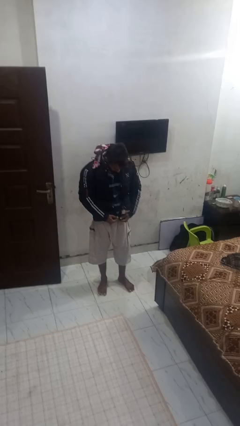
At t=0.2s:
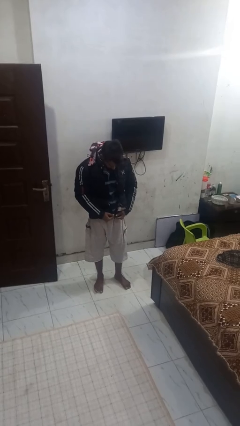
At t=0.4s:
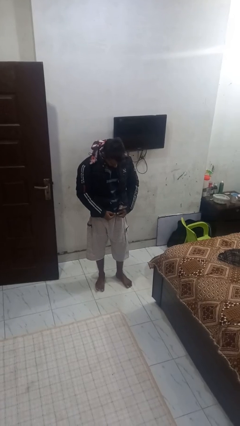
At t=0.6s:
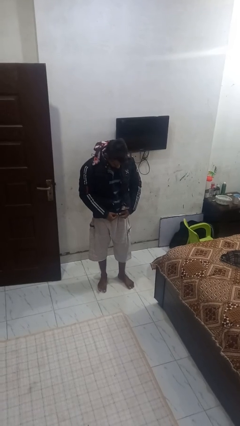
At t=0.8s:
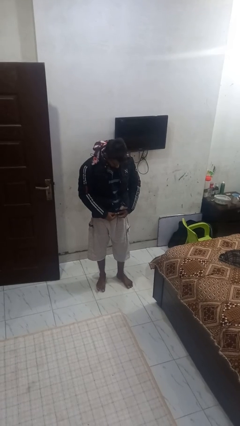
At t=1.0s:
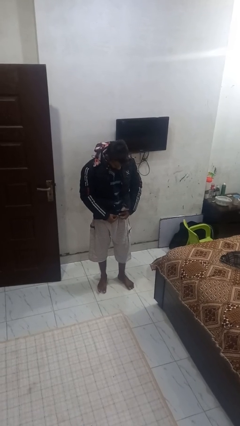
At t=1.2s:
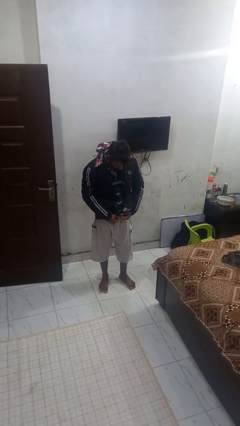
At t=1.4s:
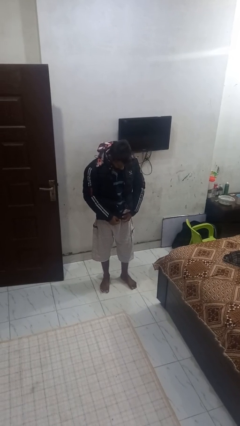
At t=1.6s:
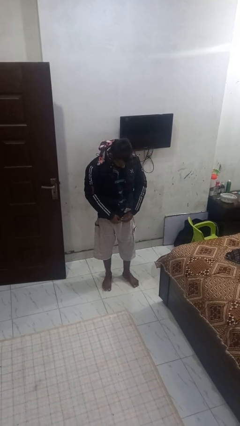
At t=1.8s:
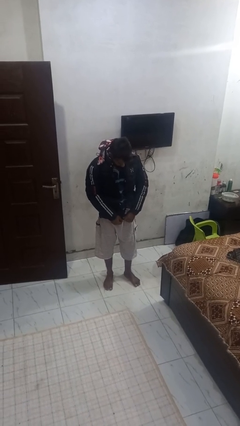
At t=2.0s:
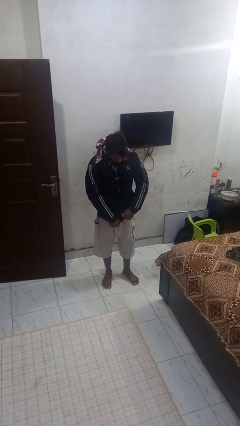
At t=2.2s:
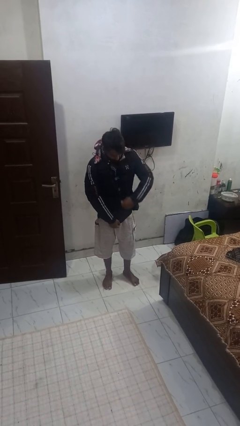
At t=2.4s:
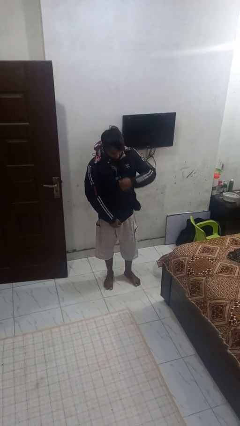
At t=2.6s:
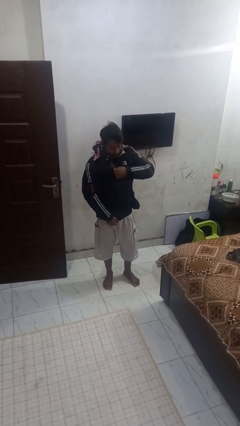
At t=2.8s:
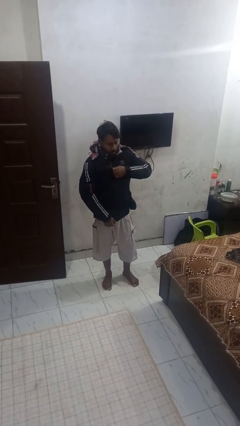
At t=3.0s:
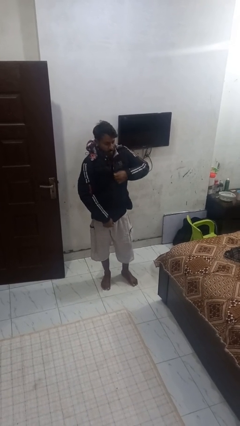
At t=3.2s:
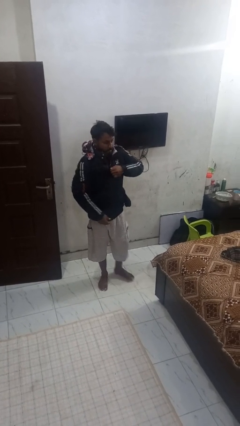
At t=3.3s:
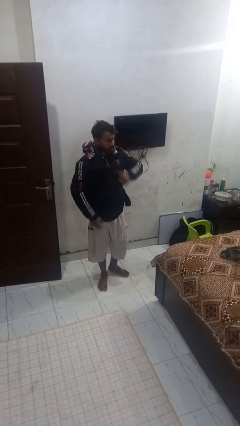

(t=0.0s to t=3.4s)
person zips up jacket

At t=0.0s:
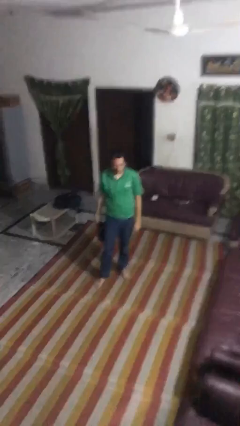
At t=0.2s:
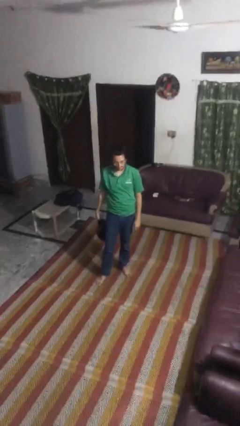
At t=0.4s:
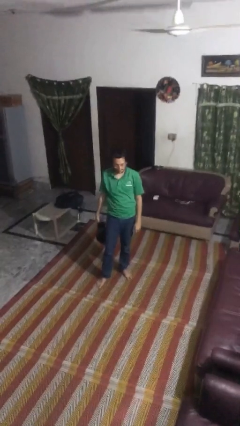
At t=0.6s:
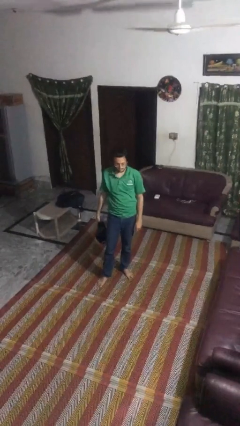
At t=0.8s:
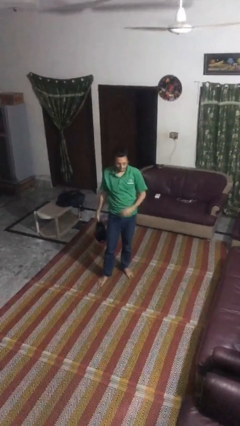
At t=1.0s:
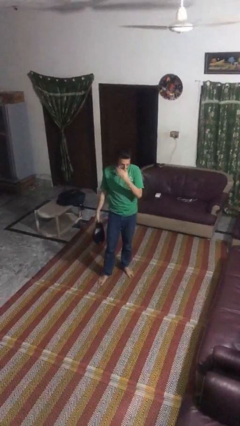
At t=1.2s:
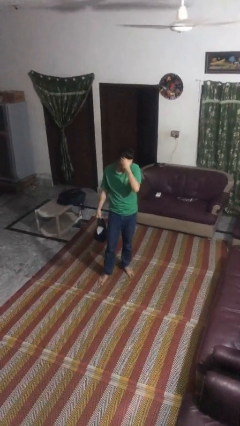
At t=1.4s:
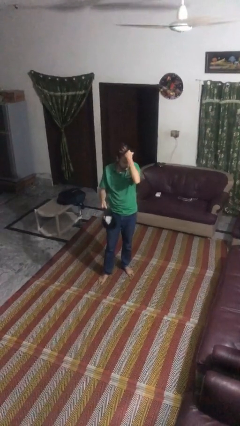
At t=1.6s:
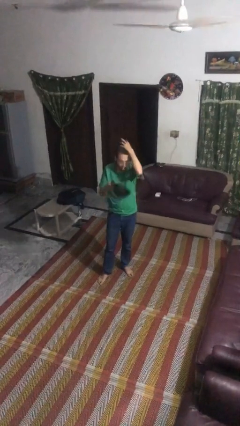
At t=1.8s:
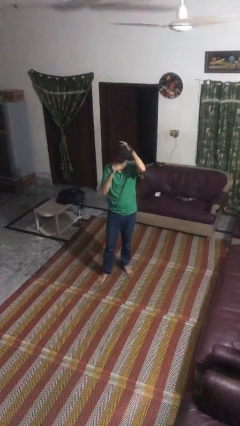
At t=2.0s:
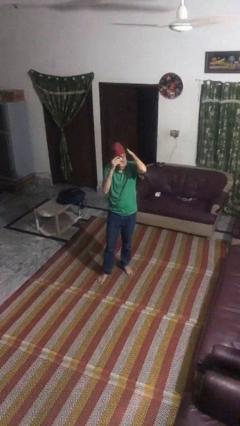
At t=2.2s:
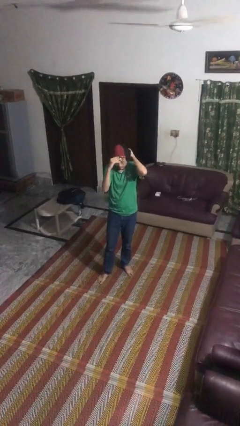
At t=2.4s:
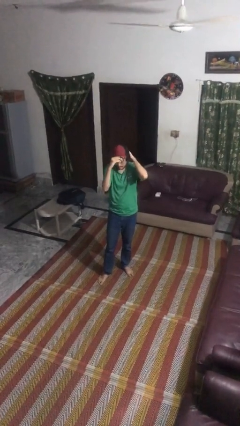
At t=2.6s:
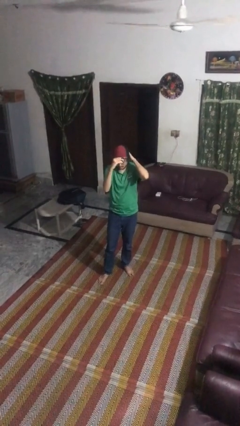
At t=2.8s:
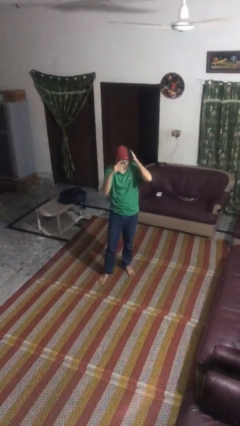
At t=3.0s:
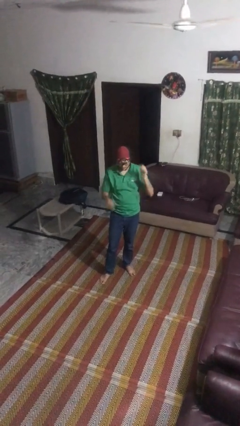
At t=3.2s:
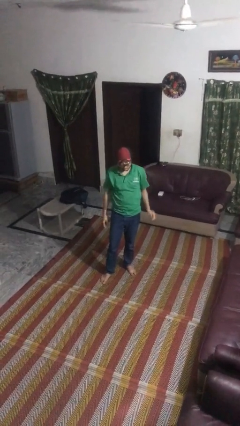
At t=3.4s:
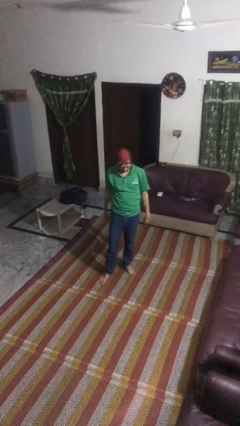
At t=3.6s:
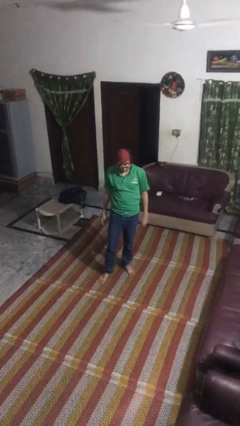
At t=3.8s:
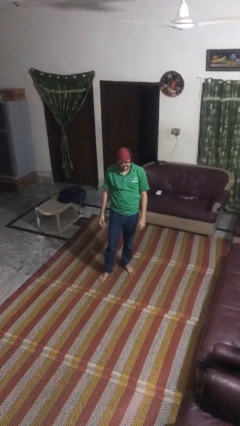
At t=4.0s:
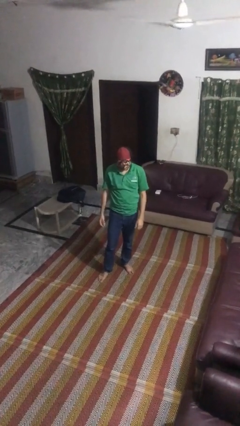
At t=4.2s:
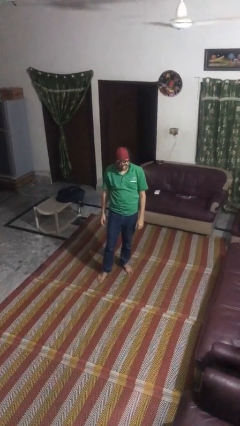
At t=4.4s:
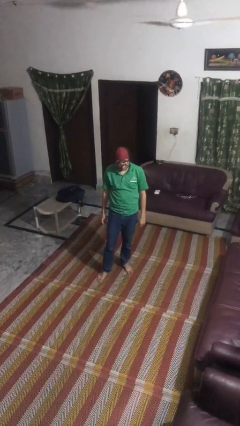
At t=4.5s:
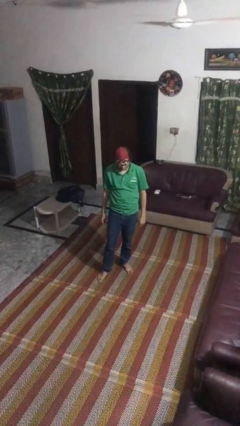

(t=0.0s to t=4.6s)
person puts on hat

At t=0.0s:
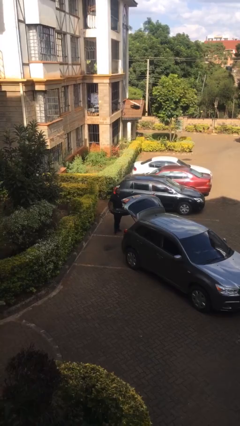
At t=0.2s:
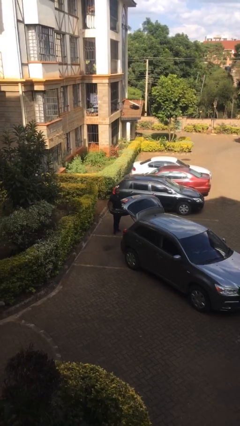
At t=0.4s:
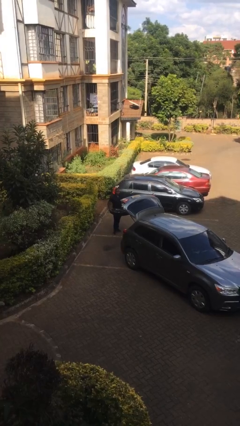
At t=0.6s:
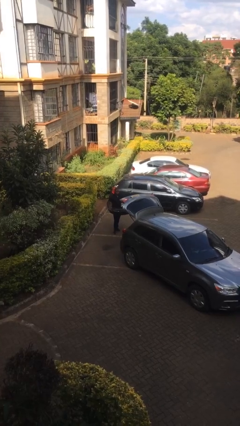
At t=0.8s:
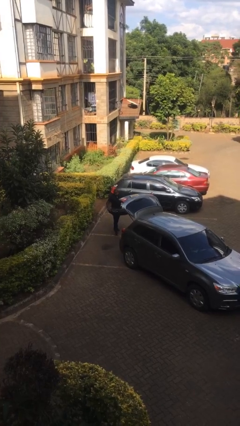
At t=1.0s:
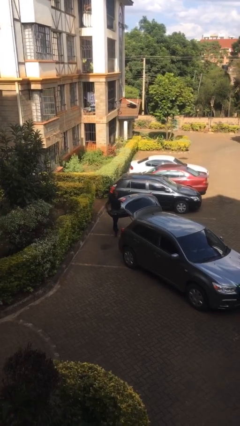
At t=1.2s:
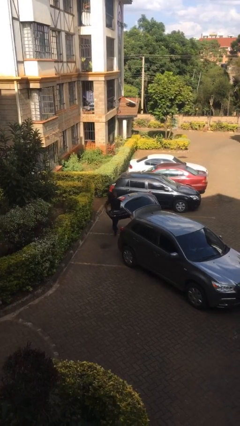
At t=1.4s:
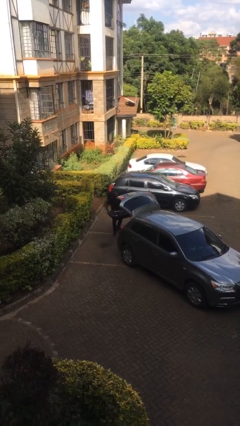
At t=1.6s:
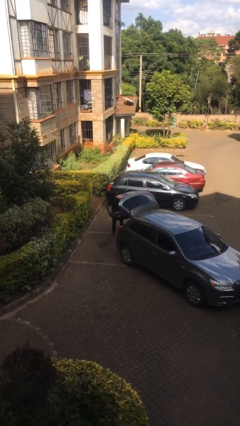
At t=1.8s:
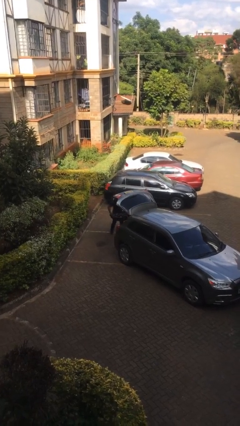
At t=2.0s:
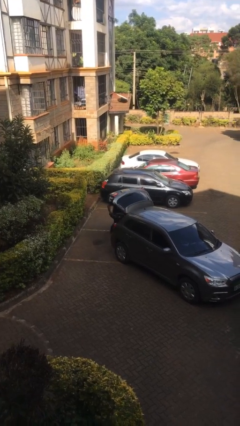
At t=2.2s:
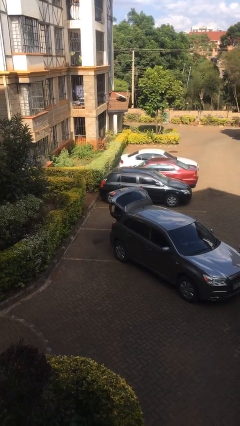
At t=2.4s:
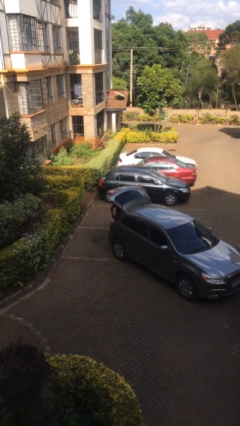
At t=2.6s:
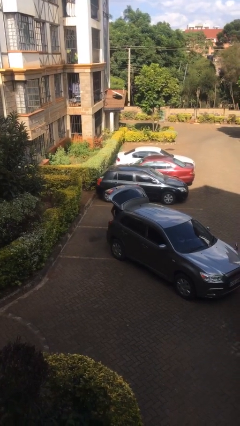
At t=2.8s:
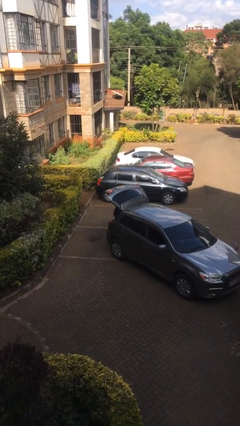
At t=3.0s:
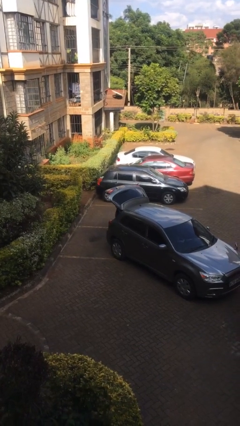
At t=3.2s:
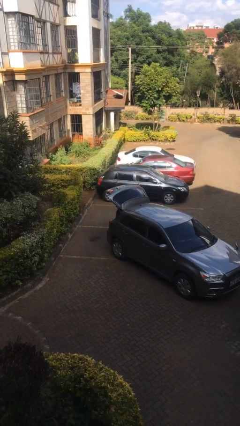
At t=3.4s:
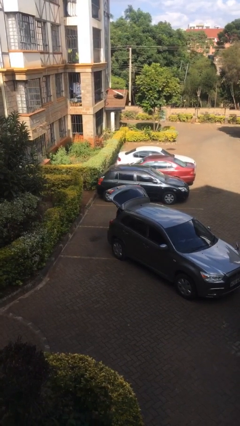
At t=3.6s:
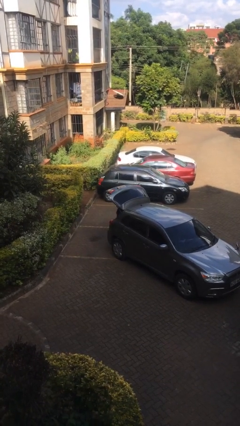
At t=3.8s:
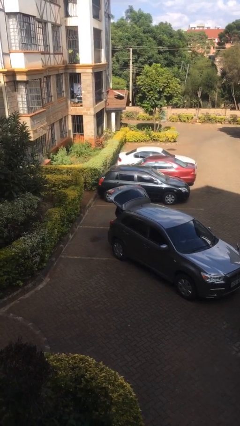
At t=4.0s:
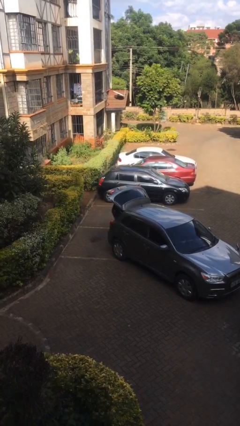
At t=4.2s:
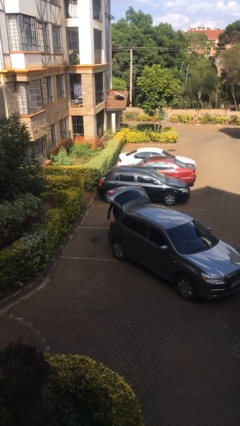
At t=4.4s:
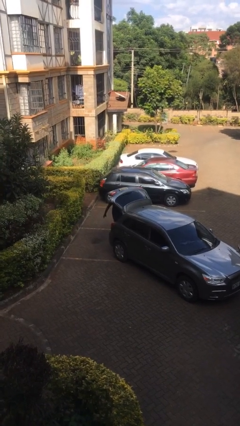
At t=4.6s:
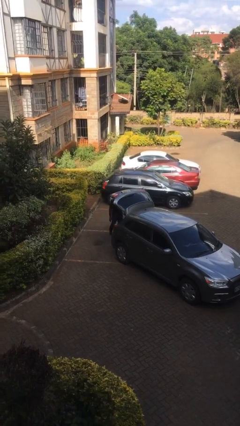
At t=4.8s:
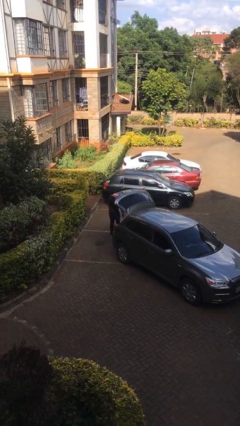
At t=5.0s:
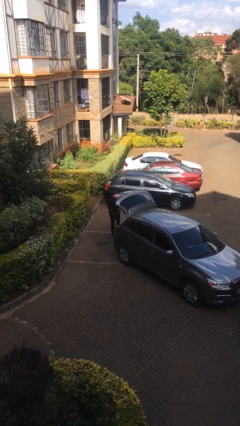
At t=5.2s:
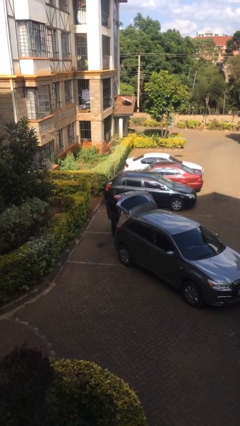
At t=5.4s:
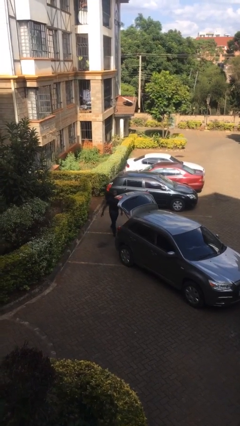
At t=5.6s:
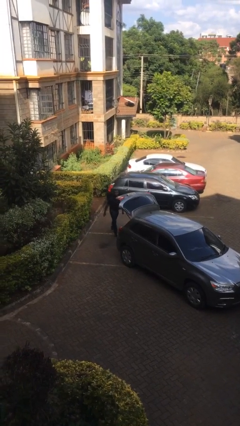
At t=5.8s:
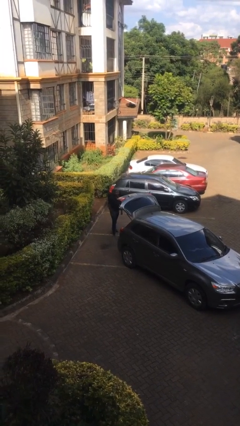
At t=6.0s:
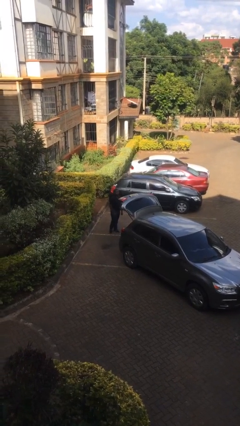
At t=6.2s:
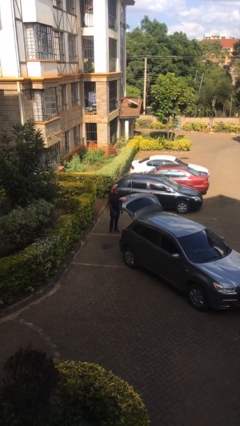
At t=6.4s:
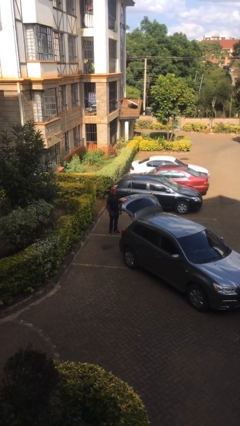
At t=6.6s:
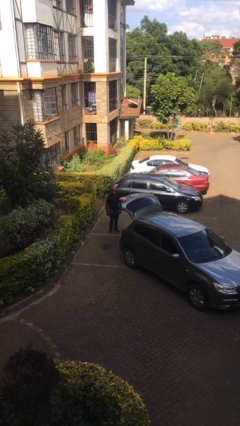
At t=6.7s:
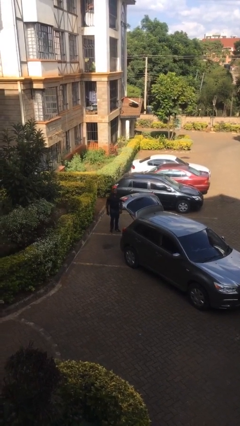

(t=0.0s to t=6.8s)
person loads car

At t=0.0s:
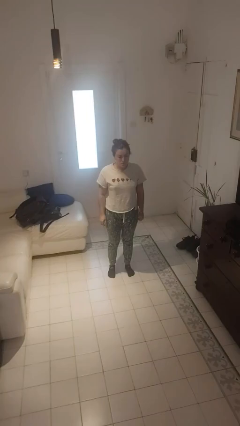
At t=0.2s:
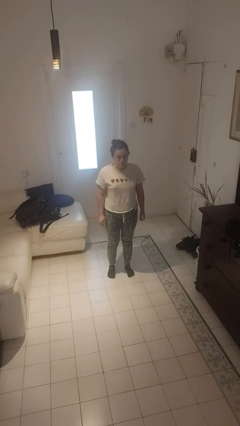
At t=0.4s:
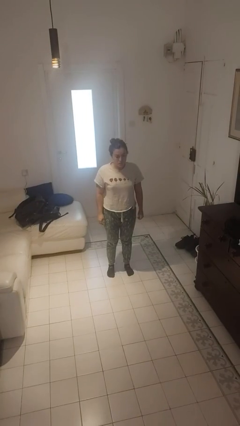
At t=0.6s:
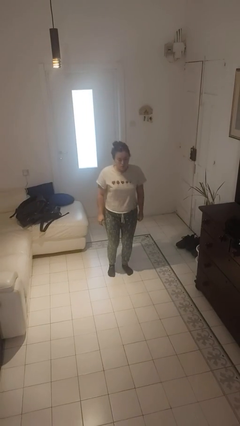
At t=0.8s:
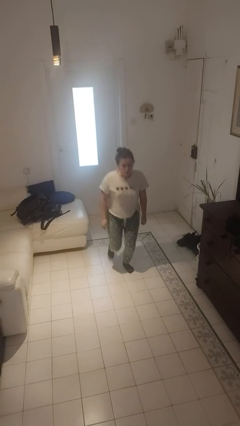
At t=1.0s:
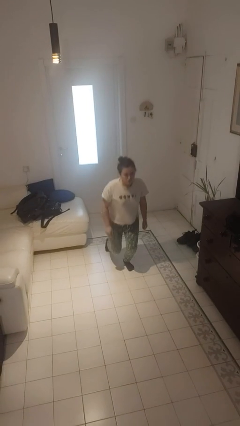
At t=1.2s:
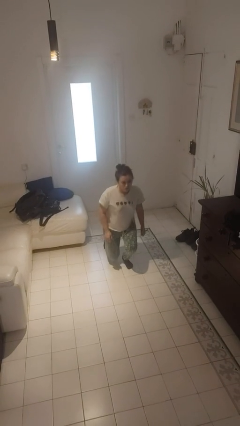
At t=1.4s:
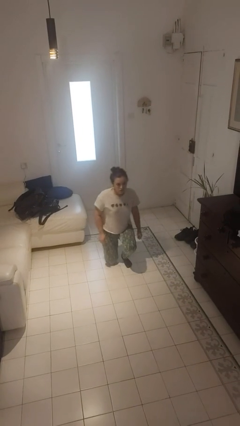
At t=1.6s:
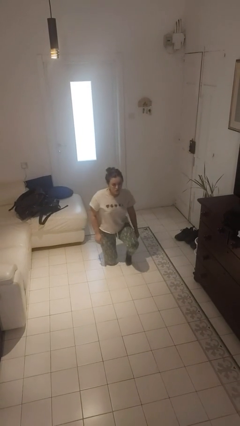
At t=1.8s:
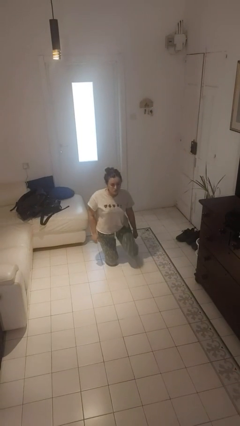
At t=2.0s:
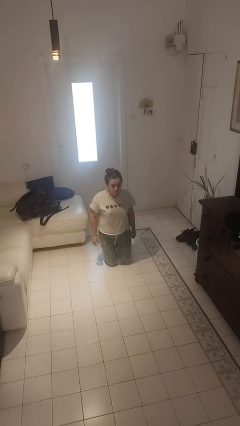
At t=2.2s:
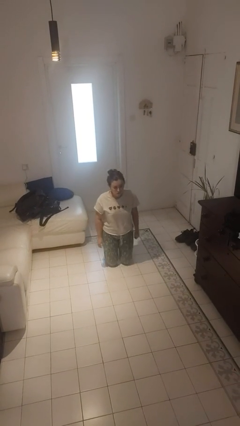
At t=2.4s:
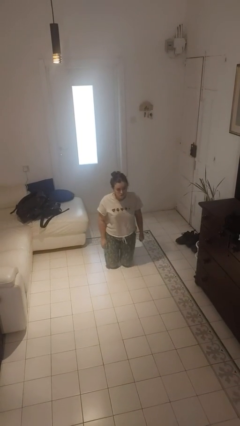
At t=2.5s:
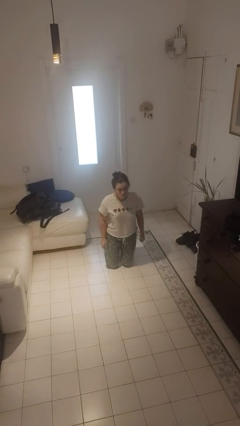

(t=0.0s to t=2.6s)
person kneels

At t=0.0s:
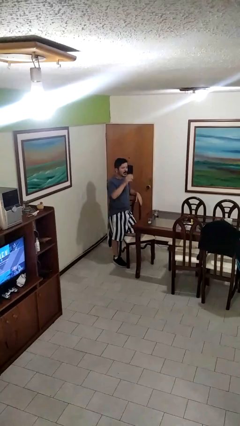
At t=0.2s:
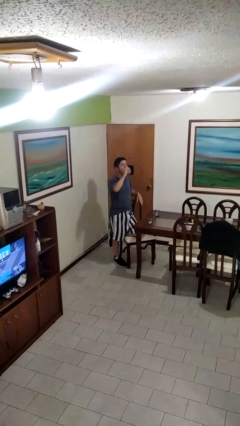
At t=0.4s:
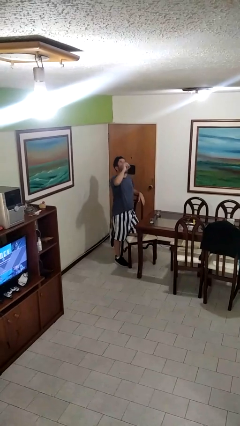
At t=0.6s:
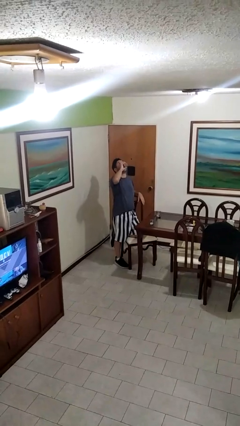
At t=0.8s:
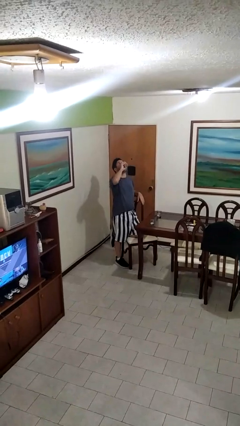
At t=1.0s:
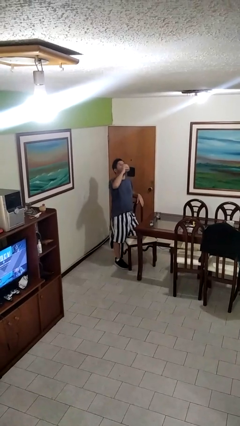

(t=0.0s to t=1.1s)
person drinks from shotglass
